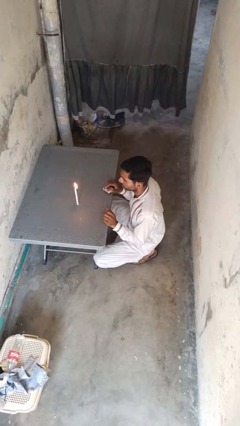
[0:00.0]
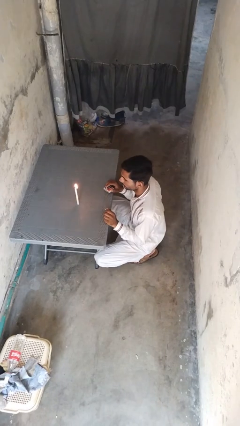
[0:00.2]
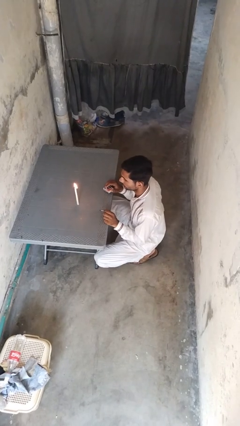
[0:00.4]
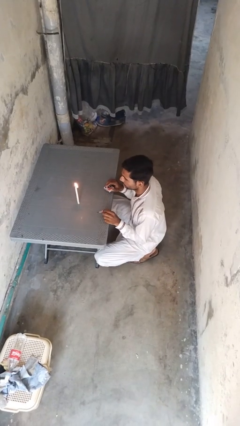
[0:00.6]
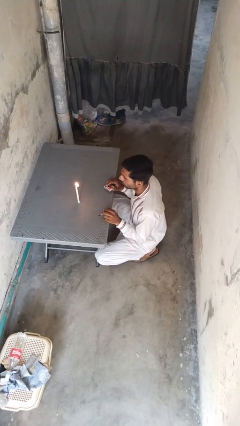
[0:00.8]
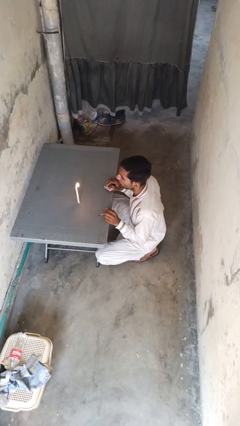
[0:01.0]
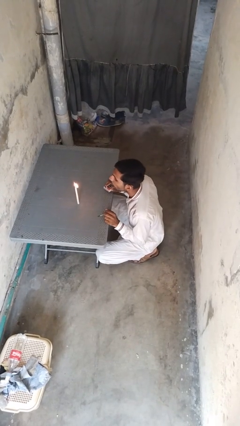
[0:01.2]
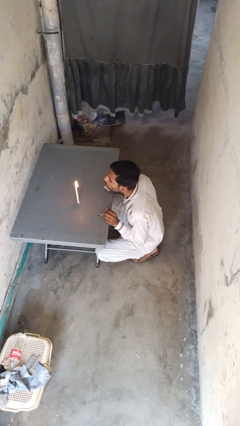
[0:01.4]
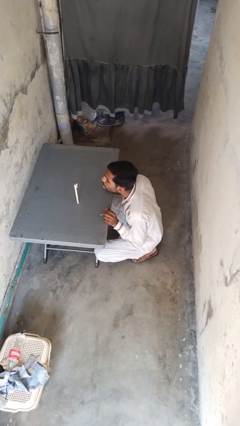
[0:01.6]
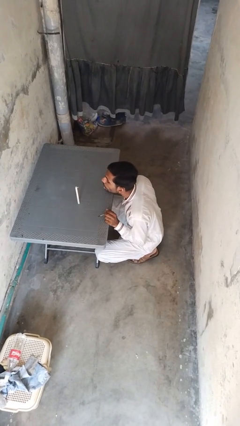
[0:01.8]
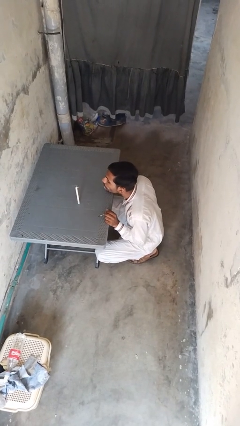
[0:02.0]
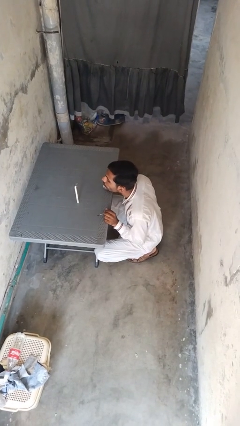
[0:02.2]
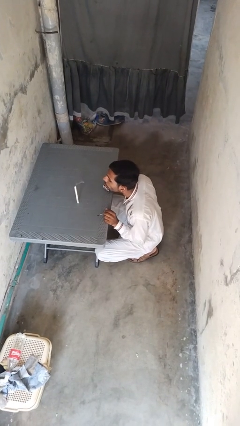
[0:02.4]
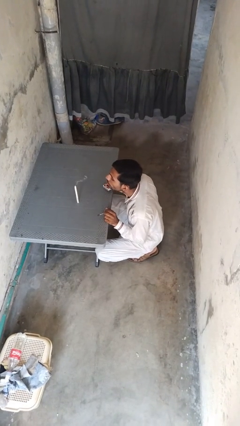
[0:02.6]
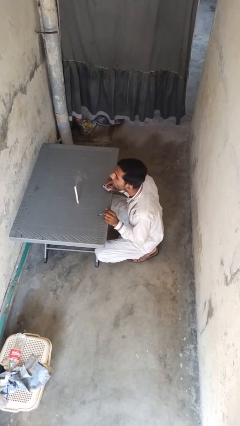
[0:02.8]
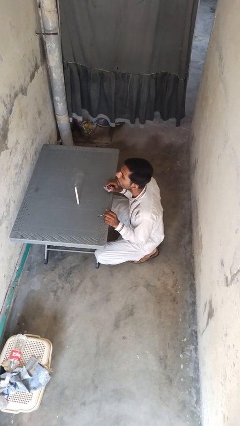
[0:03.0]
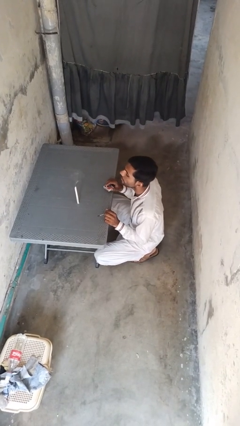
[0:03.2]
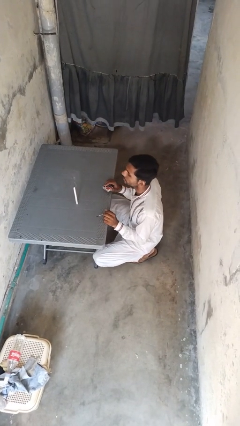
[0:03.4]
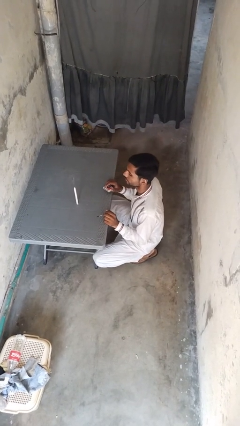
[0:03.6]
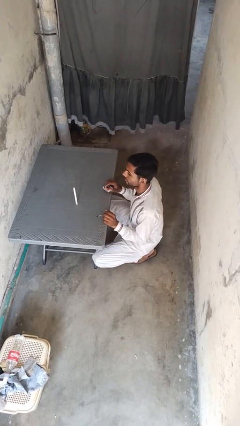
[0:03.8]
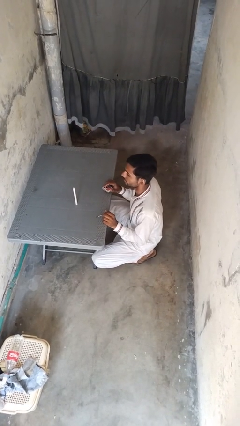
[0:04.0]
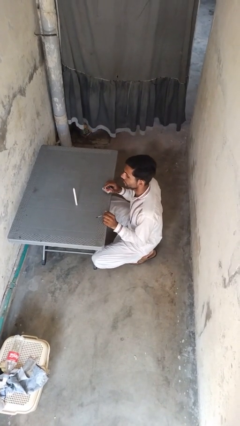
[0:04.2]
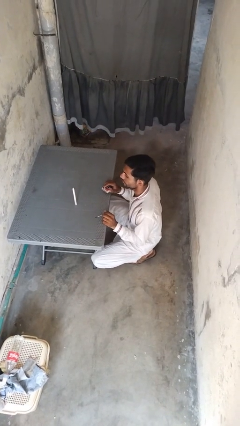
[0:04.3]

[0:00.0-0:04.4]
person extinguishes candle

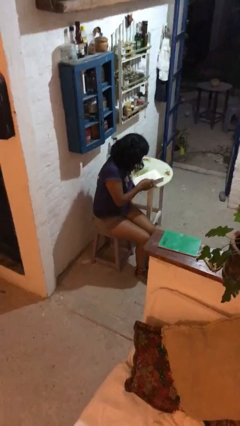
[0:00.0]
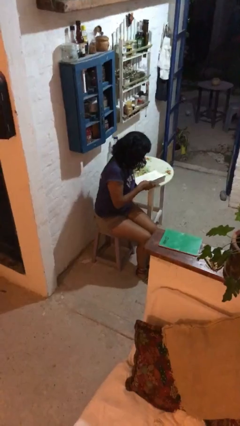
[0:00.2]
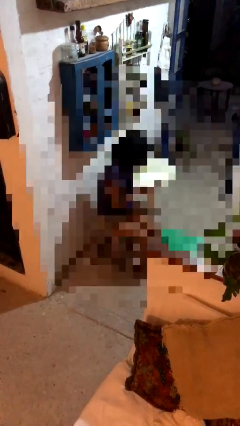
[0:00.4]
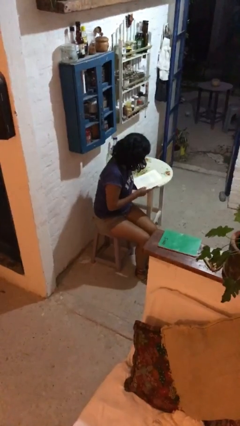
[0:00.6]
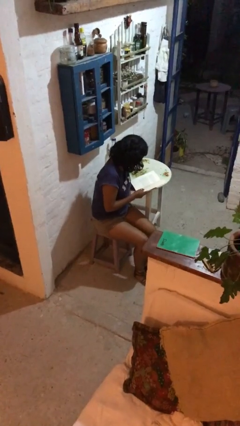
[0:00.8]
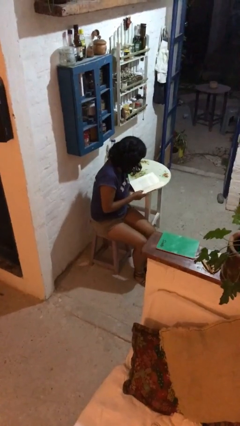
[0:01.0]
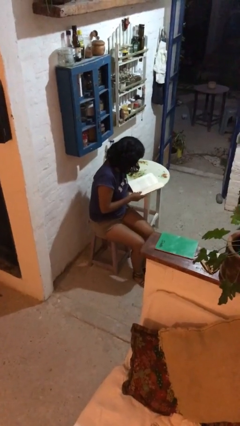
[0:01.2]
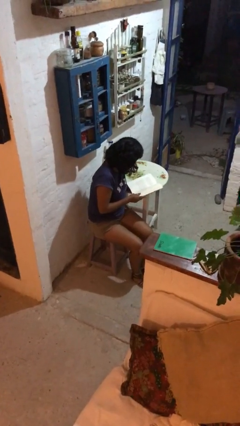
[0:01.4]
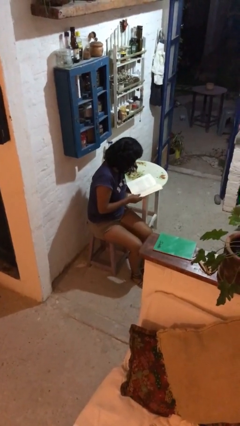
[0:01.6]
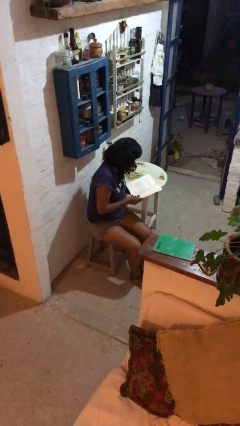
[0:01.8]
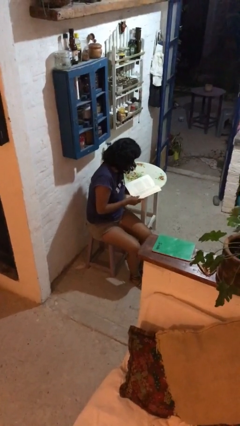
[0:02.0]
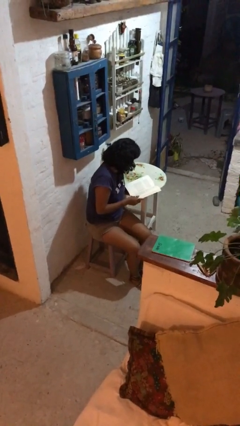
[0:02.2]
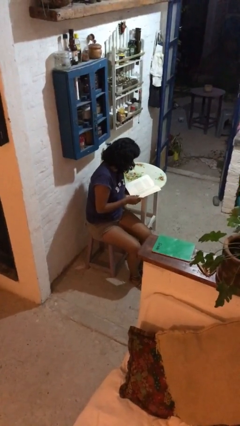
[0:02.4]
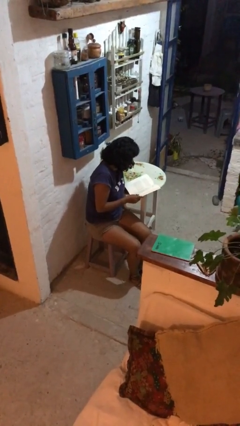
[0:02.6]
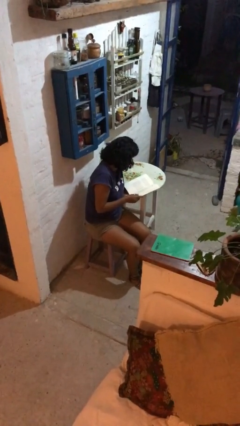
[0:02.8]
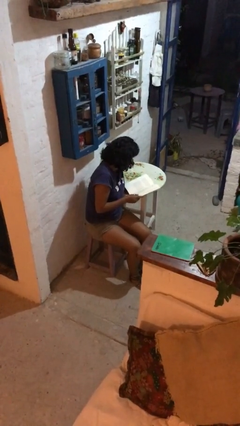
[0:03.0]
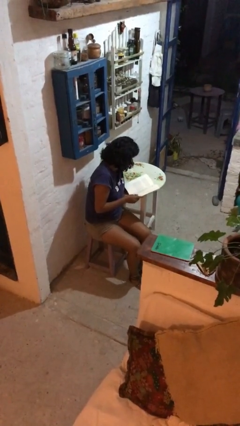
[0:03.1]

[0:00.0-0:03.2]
person reads document

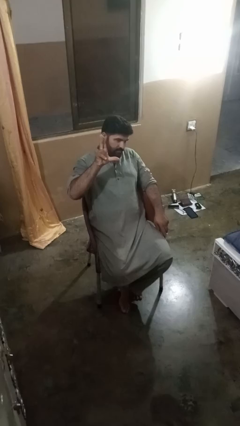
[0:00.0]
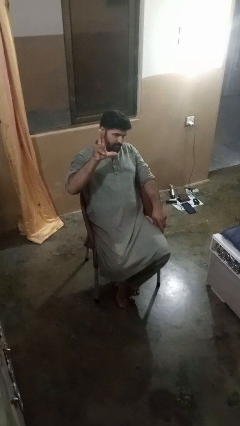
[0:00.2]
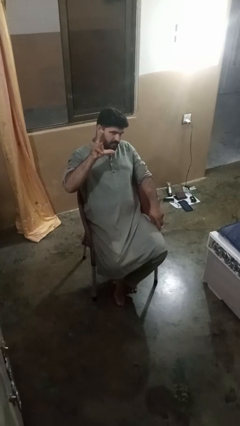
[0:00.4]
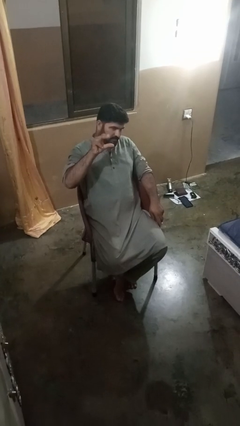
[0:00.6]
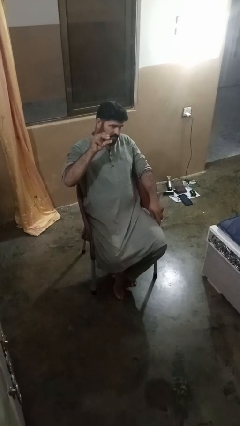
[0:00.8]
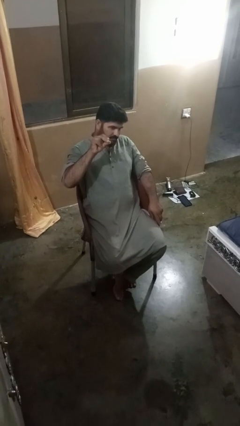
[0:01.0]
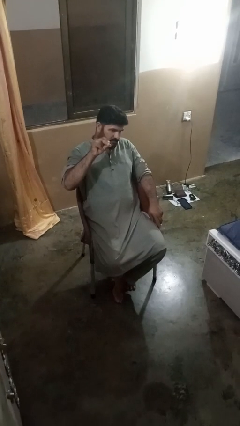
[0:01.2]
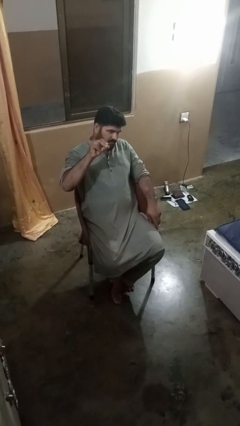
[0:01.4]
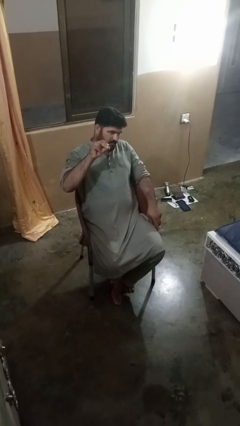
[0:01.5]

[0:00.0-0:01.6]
person gestures zoom in

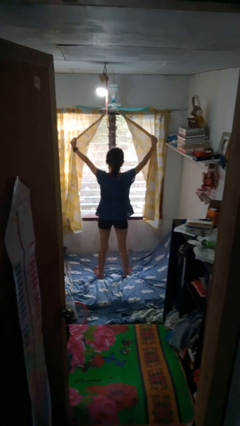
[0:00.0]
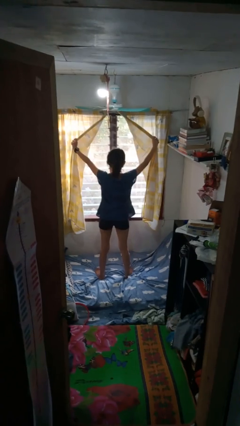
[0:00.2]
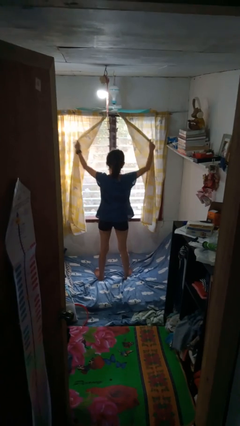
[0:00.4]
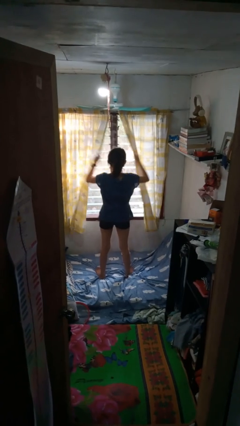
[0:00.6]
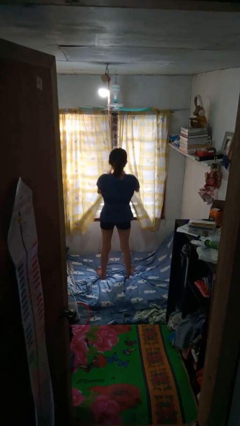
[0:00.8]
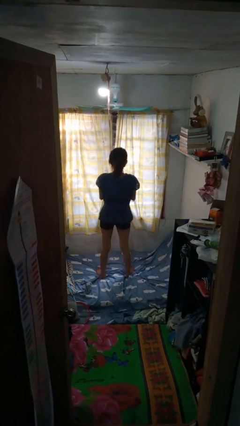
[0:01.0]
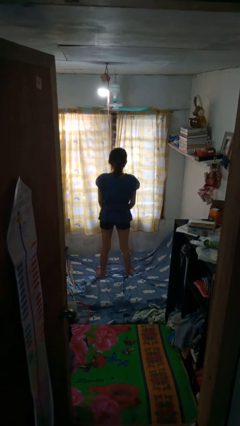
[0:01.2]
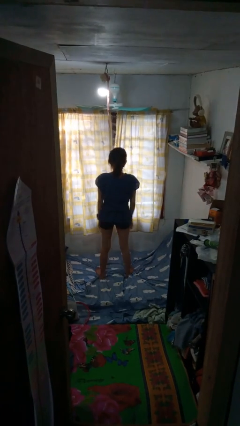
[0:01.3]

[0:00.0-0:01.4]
person closes curtains

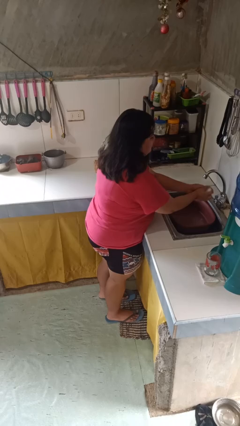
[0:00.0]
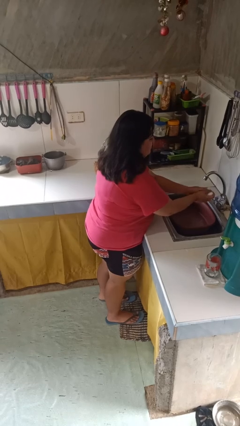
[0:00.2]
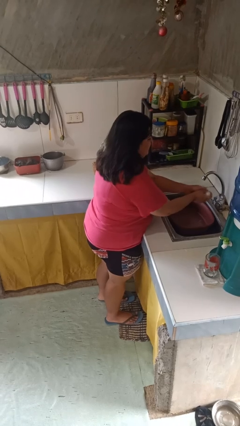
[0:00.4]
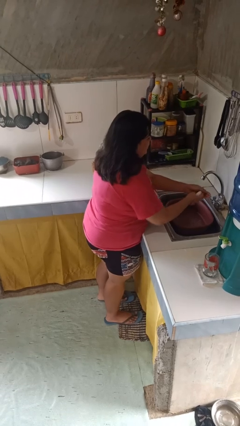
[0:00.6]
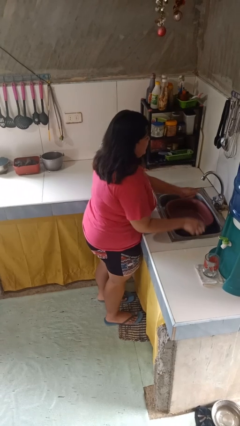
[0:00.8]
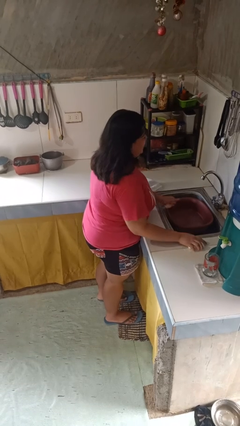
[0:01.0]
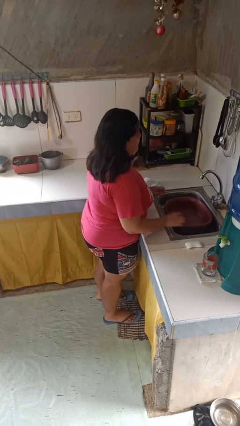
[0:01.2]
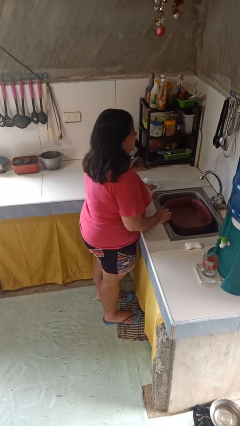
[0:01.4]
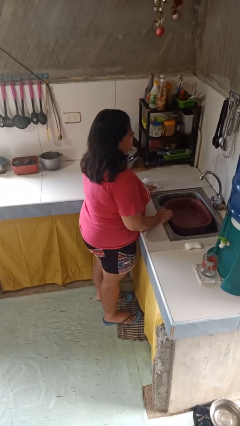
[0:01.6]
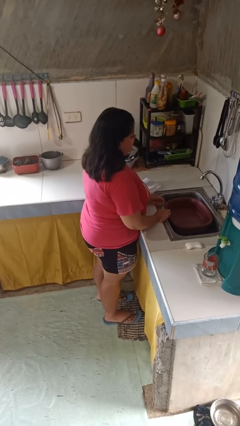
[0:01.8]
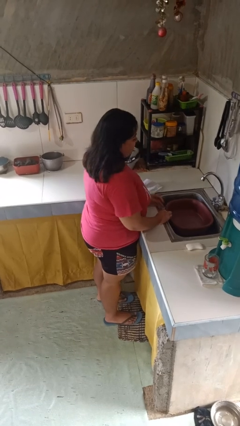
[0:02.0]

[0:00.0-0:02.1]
person washes hands

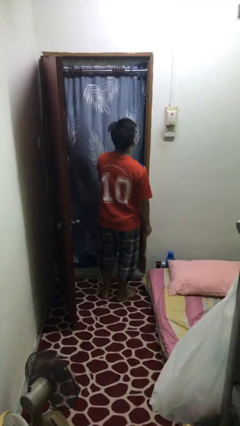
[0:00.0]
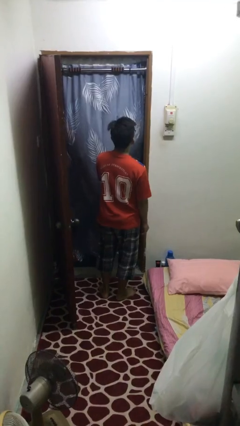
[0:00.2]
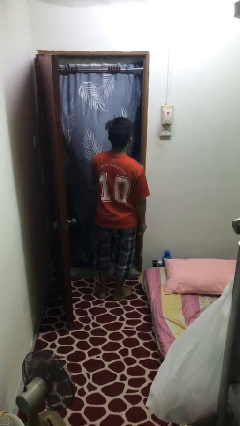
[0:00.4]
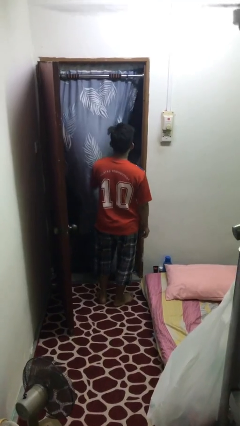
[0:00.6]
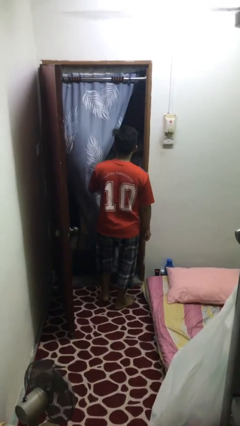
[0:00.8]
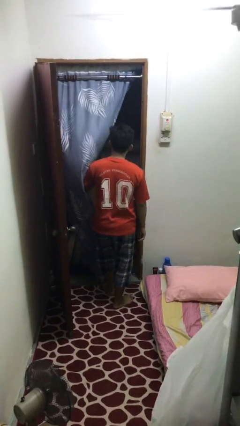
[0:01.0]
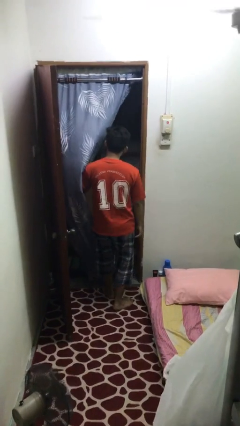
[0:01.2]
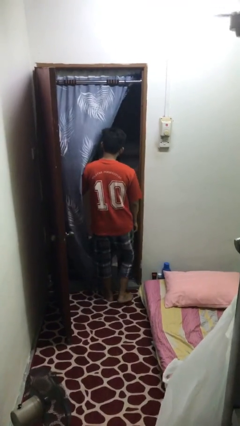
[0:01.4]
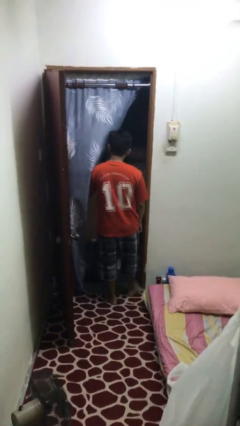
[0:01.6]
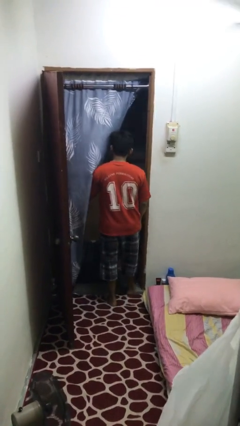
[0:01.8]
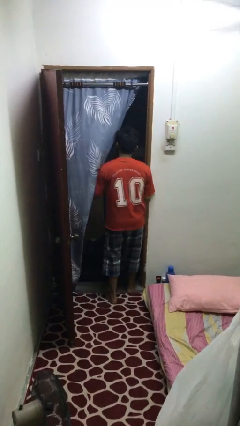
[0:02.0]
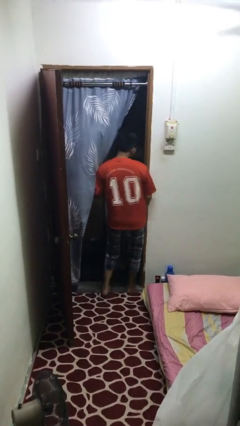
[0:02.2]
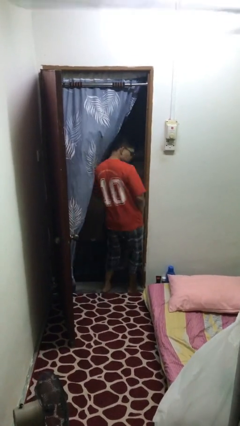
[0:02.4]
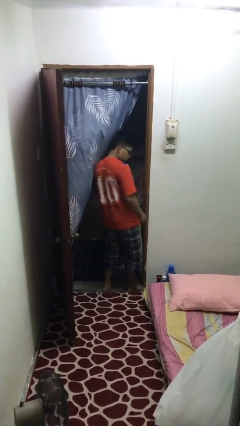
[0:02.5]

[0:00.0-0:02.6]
person bumps into wall

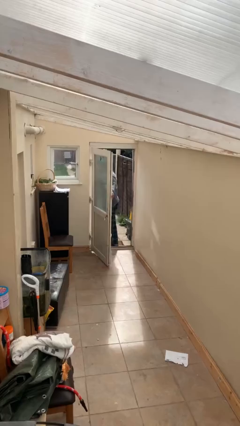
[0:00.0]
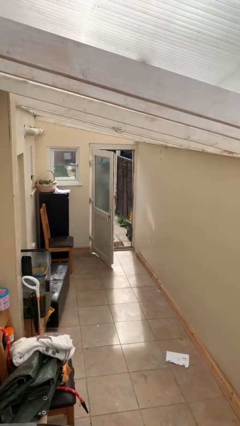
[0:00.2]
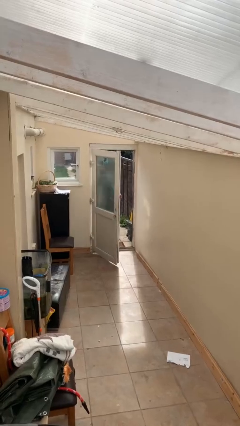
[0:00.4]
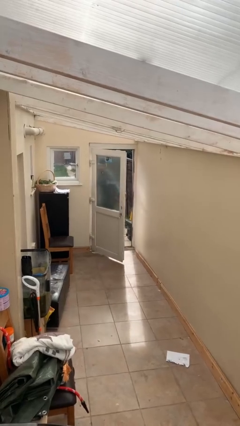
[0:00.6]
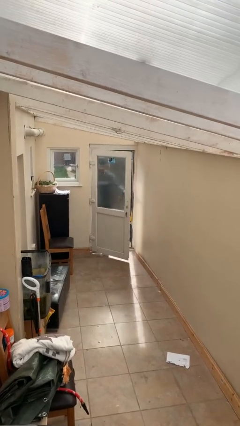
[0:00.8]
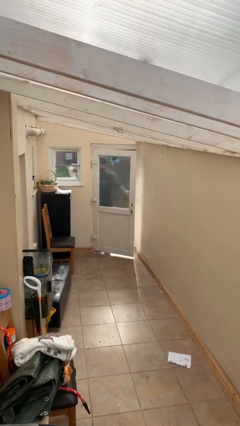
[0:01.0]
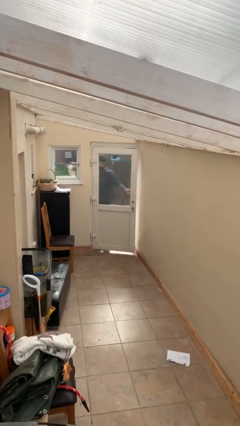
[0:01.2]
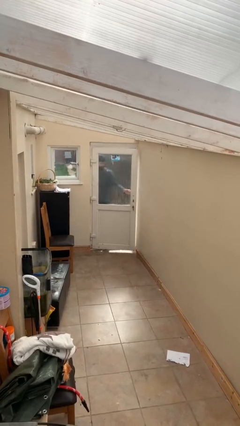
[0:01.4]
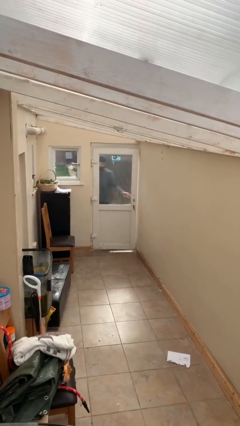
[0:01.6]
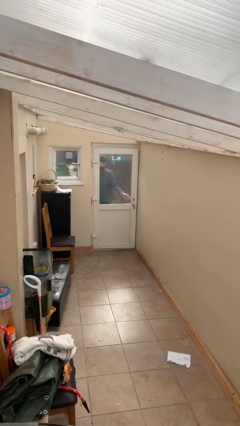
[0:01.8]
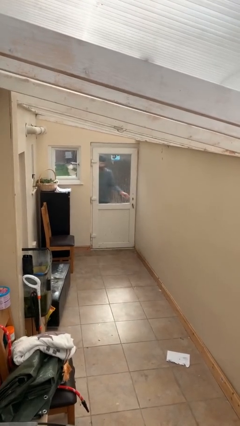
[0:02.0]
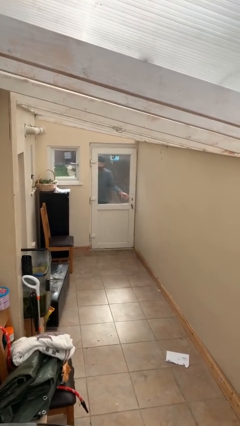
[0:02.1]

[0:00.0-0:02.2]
person closes facility door
